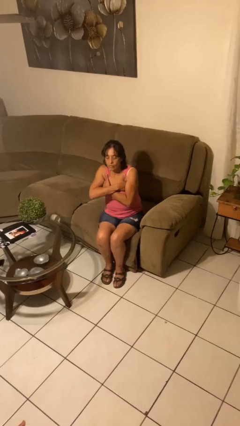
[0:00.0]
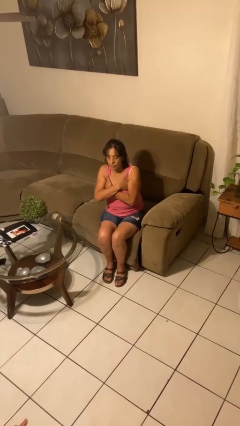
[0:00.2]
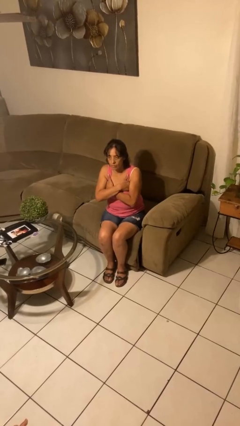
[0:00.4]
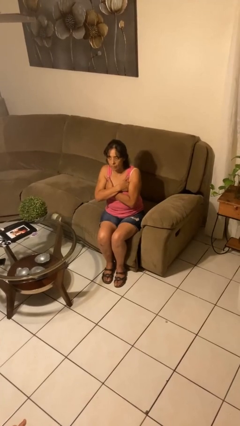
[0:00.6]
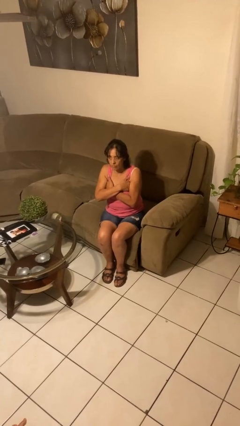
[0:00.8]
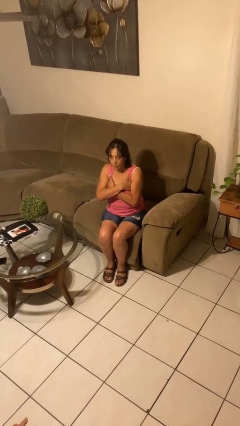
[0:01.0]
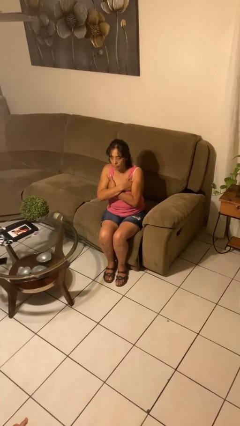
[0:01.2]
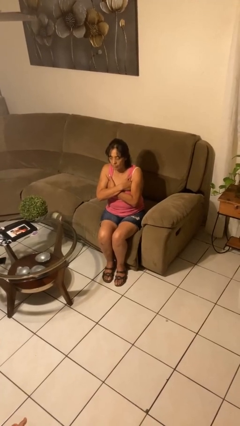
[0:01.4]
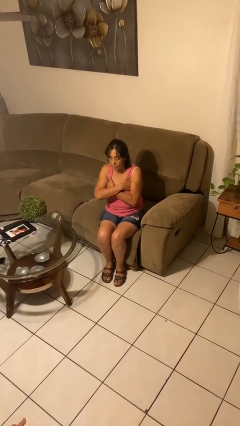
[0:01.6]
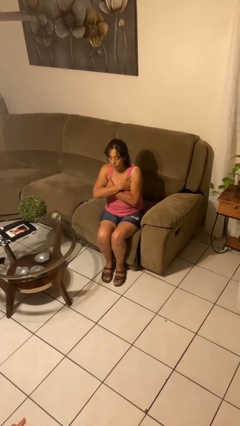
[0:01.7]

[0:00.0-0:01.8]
person gestures arms x

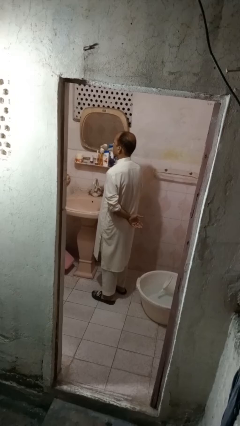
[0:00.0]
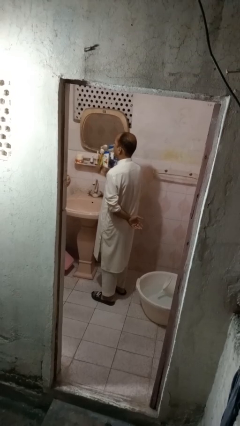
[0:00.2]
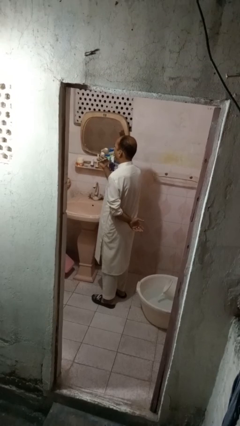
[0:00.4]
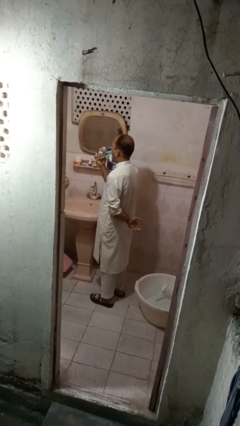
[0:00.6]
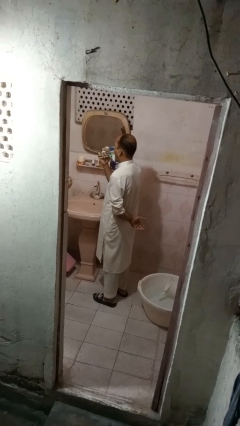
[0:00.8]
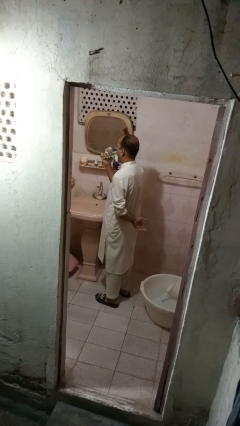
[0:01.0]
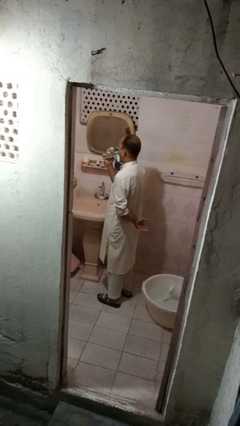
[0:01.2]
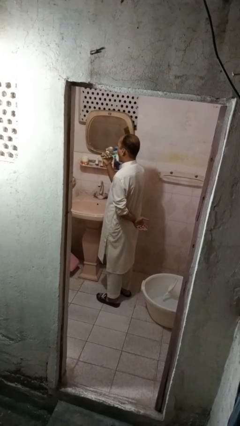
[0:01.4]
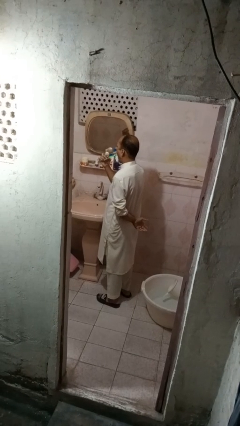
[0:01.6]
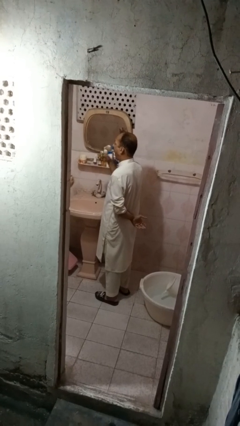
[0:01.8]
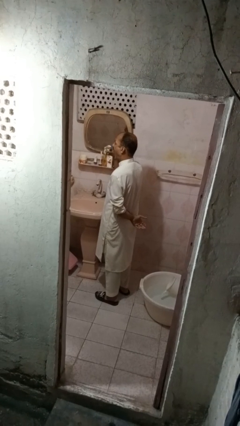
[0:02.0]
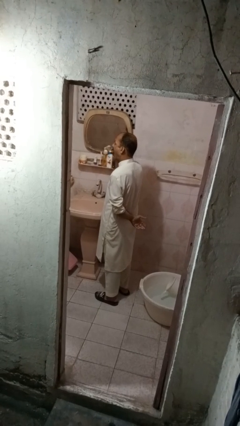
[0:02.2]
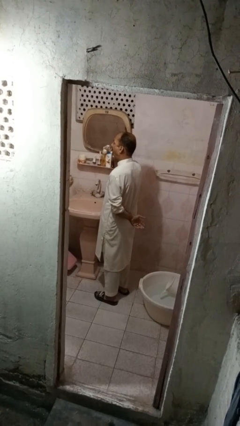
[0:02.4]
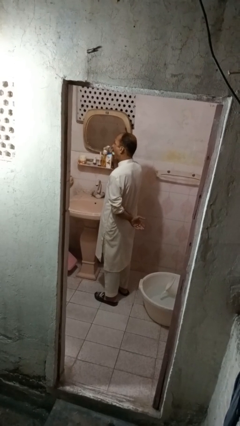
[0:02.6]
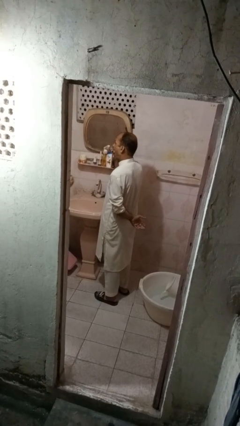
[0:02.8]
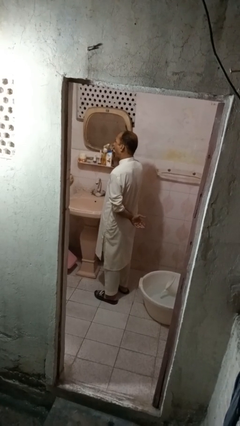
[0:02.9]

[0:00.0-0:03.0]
person brushes teeth

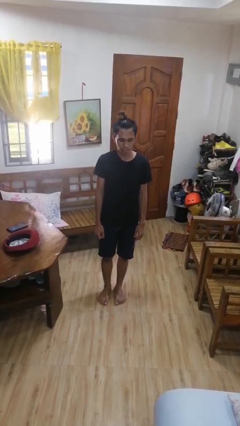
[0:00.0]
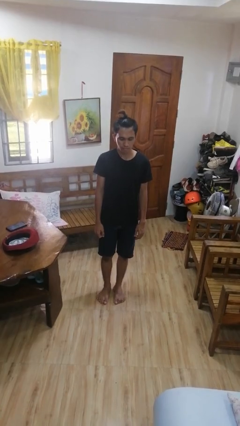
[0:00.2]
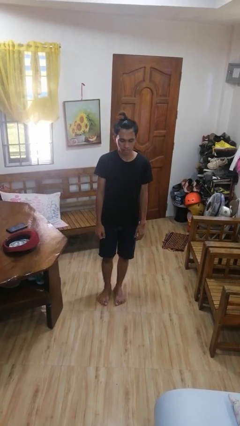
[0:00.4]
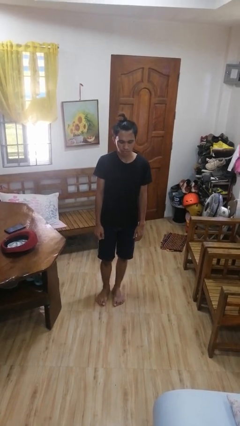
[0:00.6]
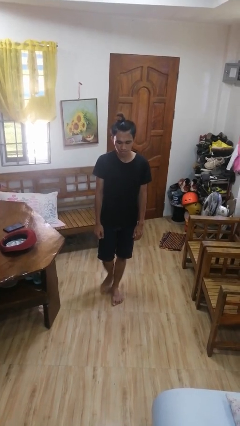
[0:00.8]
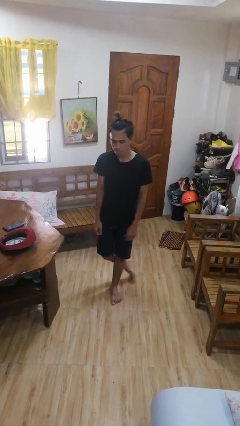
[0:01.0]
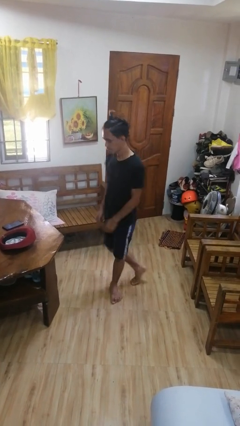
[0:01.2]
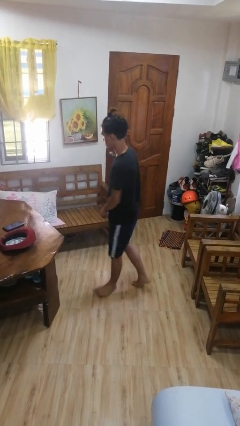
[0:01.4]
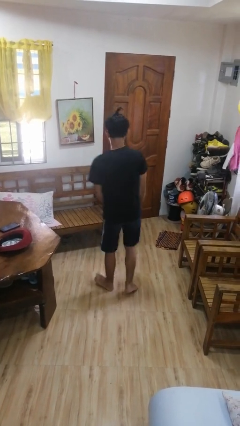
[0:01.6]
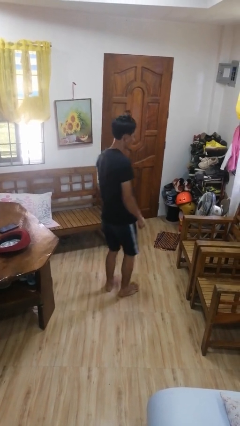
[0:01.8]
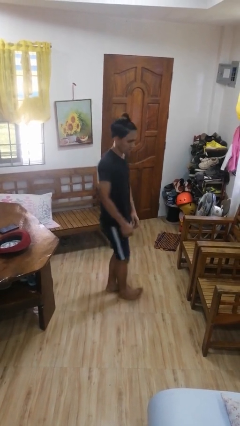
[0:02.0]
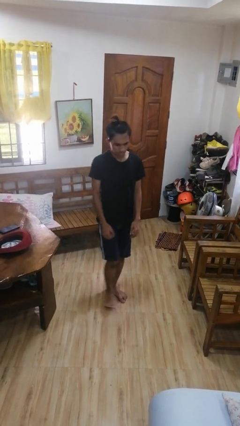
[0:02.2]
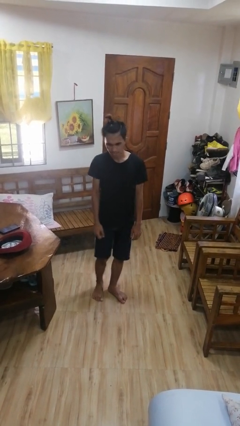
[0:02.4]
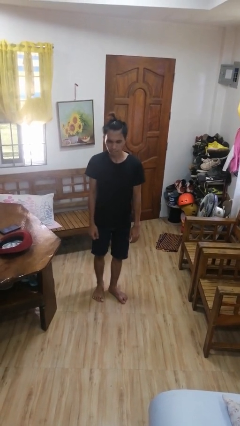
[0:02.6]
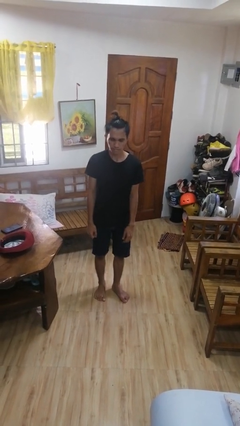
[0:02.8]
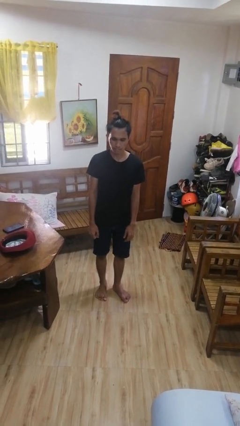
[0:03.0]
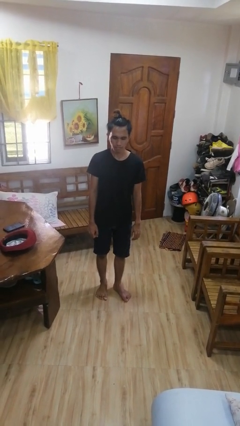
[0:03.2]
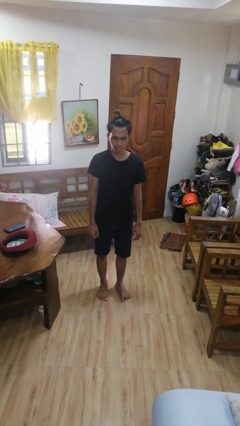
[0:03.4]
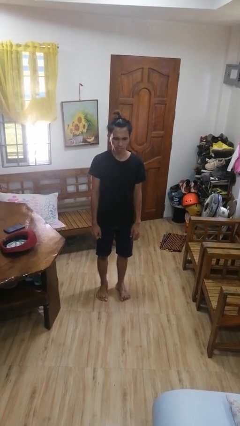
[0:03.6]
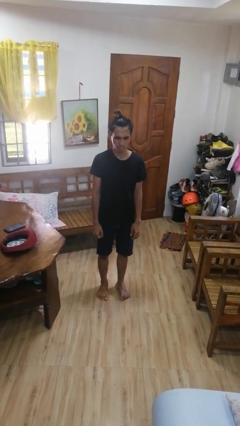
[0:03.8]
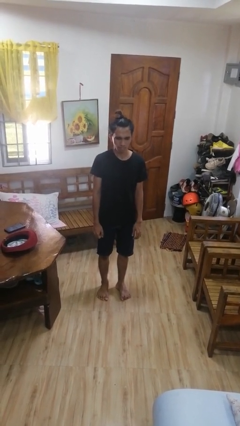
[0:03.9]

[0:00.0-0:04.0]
person twirls

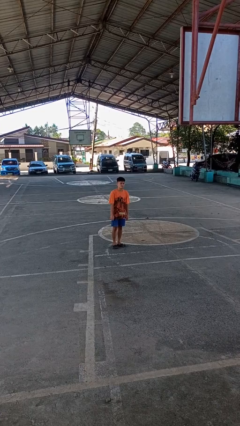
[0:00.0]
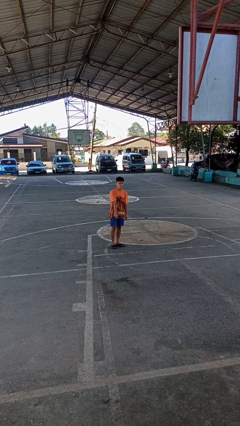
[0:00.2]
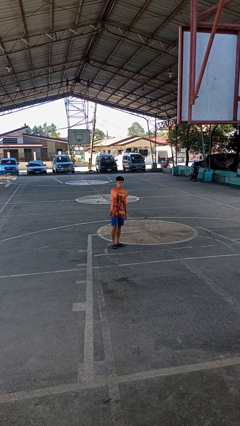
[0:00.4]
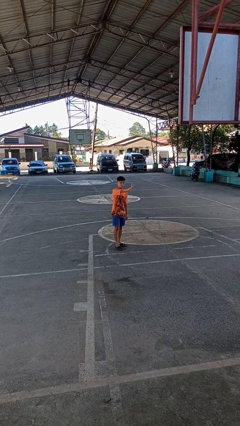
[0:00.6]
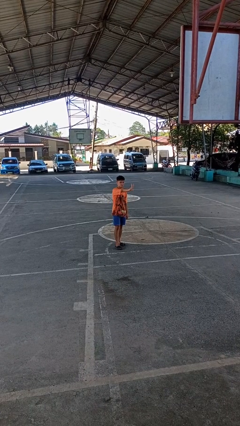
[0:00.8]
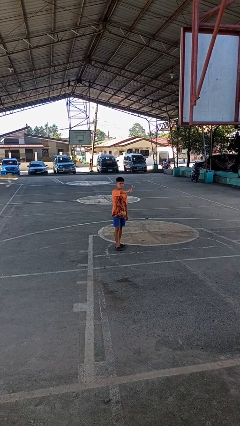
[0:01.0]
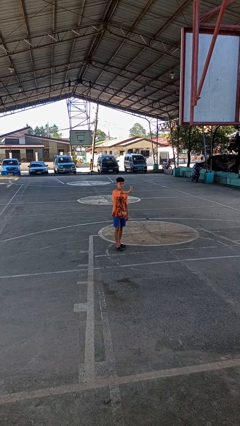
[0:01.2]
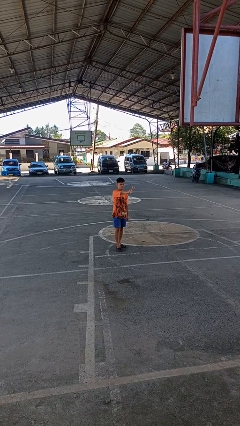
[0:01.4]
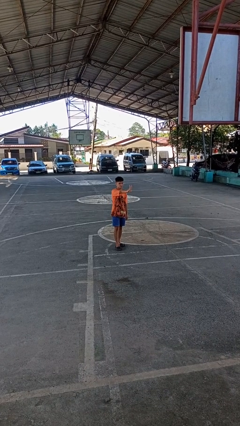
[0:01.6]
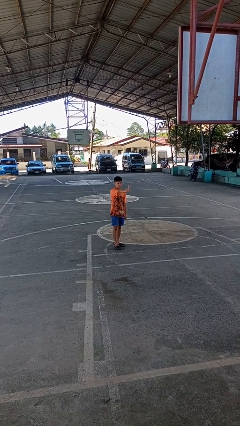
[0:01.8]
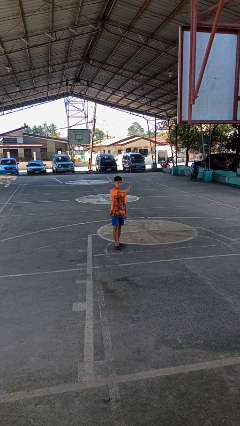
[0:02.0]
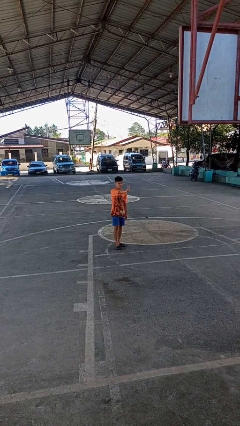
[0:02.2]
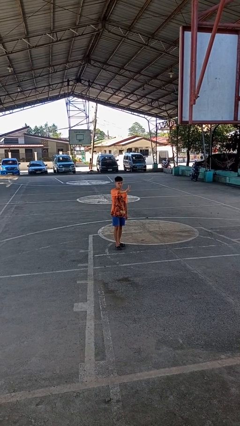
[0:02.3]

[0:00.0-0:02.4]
person gestures peace

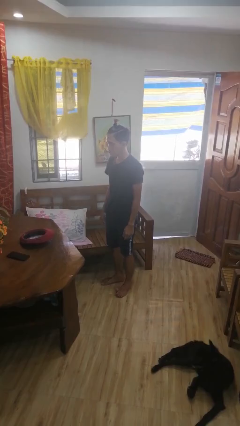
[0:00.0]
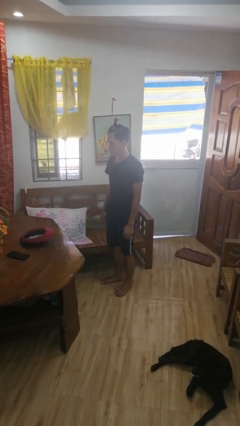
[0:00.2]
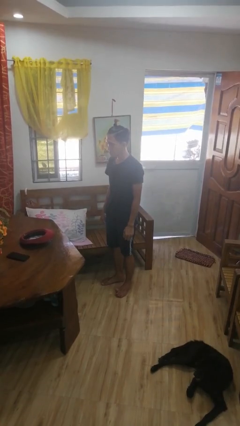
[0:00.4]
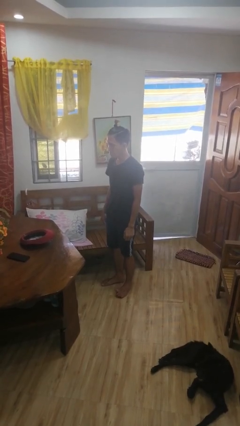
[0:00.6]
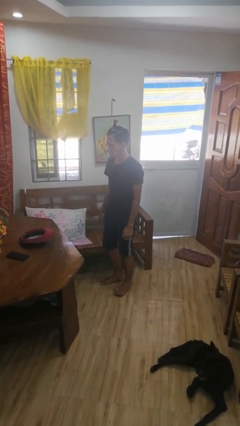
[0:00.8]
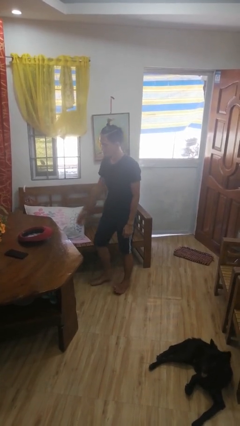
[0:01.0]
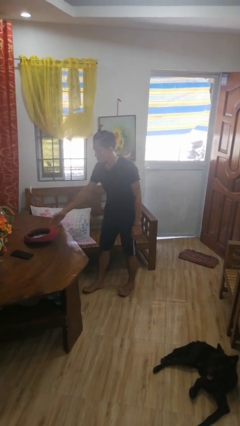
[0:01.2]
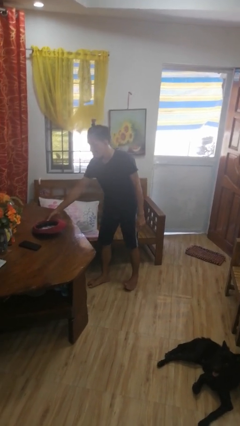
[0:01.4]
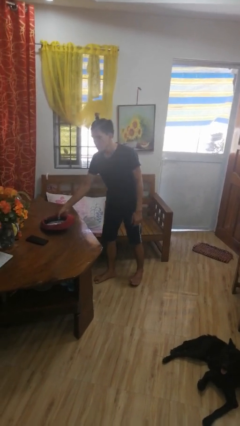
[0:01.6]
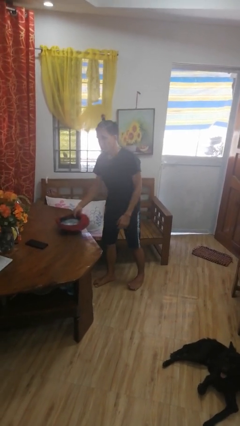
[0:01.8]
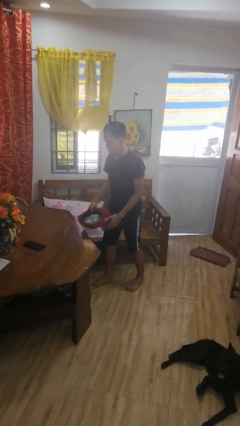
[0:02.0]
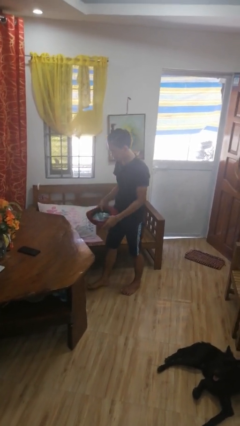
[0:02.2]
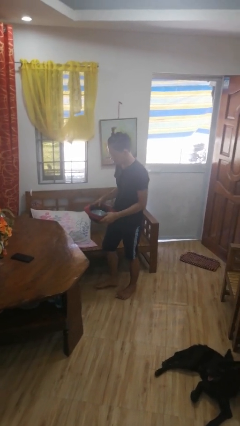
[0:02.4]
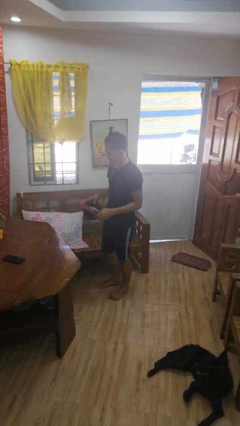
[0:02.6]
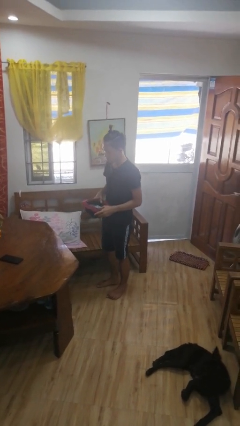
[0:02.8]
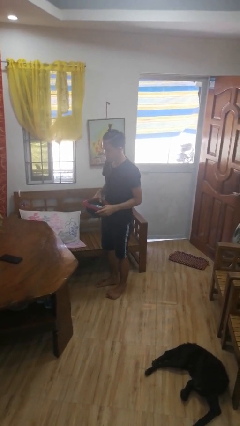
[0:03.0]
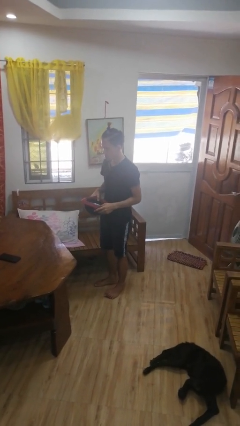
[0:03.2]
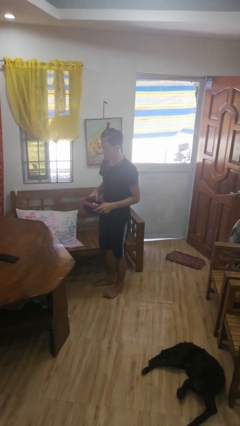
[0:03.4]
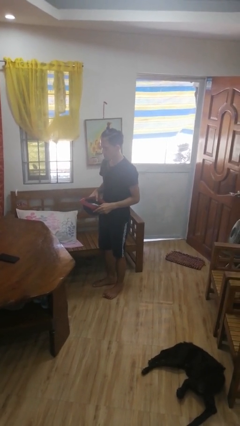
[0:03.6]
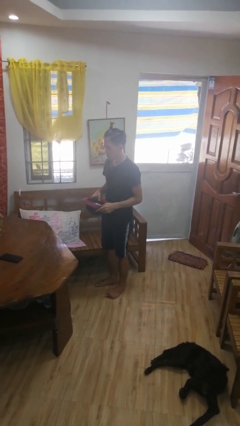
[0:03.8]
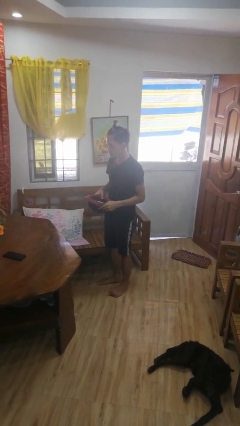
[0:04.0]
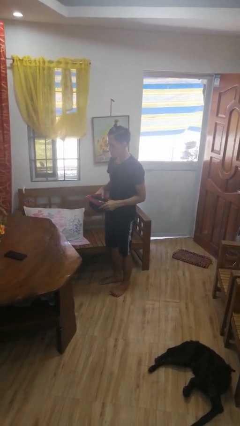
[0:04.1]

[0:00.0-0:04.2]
person picks up object from table

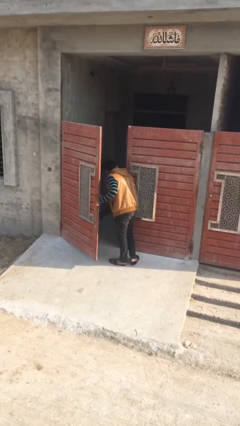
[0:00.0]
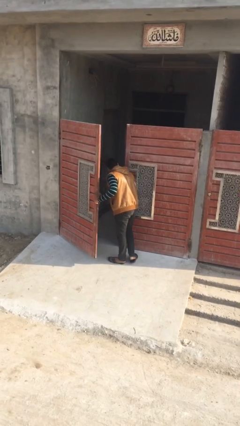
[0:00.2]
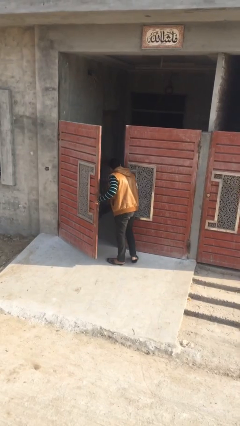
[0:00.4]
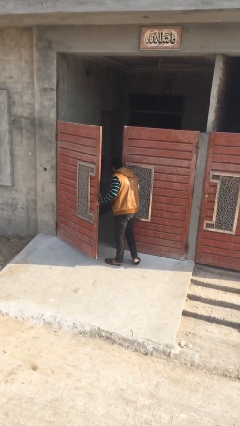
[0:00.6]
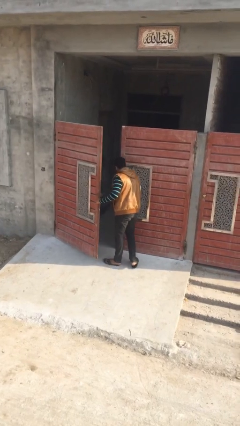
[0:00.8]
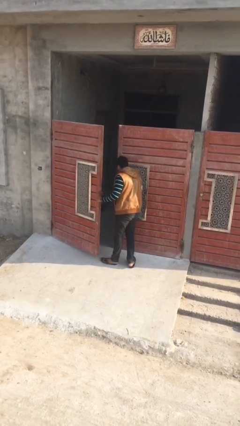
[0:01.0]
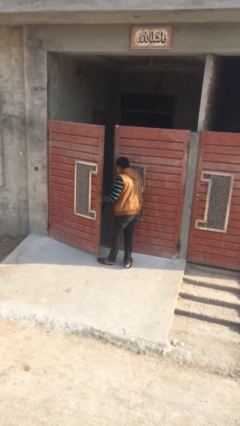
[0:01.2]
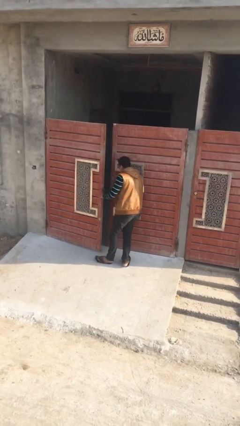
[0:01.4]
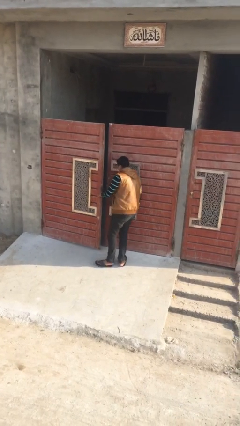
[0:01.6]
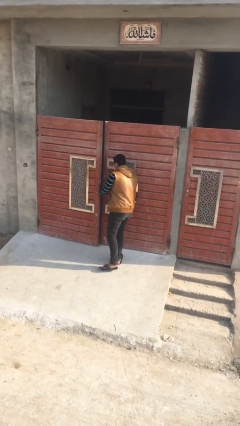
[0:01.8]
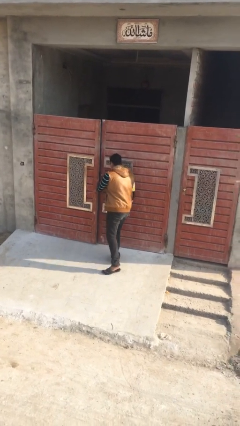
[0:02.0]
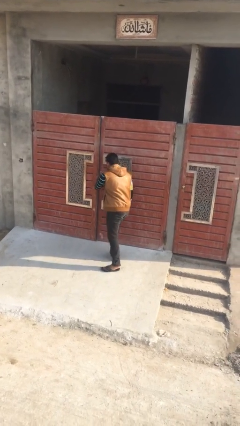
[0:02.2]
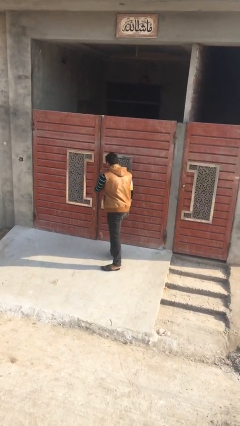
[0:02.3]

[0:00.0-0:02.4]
person closes facility door
